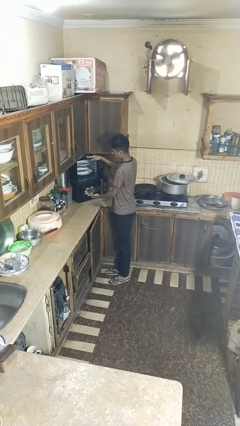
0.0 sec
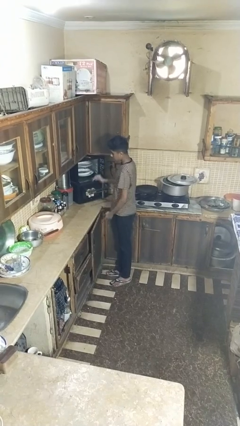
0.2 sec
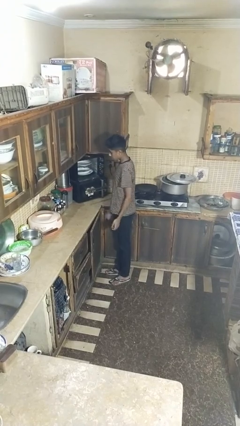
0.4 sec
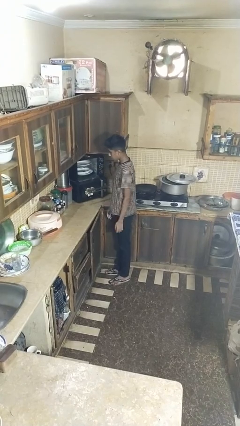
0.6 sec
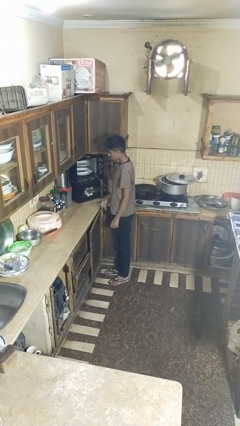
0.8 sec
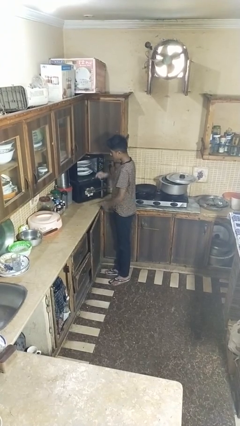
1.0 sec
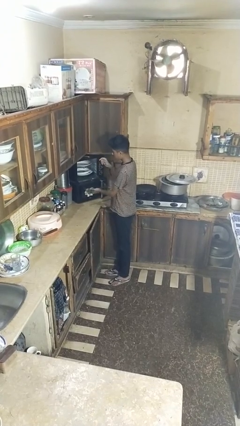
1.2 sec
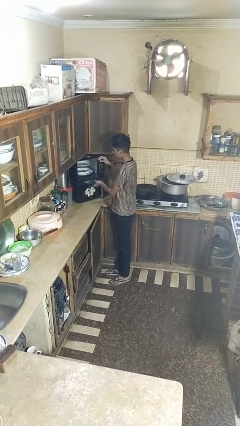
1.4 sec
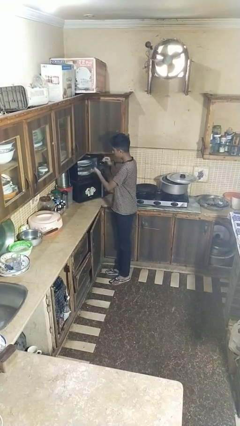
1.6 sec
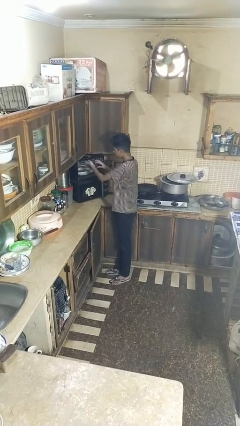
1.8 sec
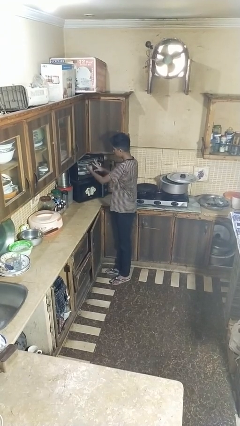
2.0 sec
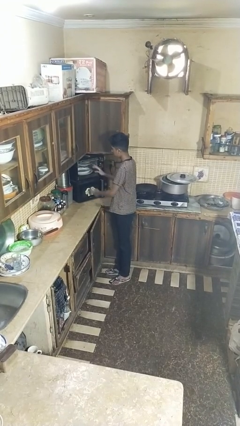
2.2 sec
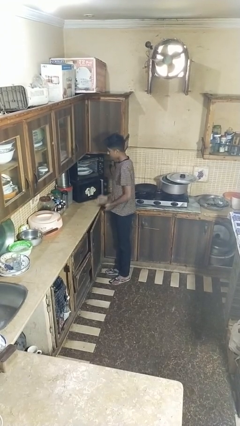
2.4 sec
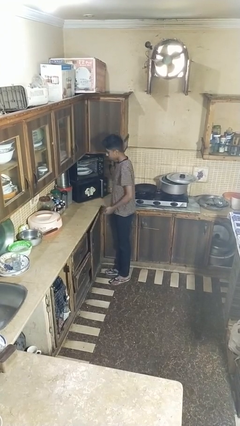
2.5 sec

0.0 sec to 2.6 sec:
person closes dishwasher

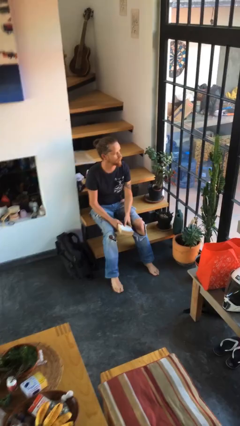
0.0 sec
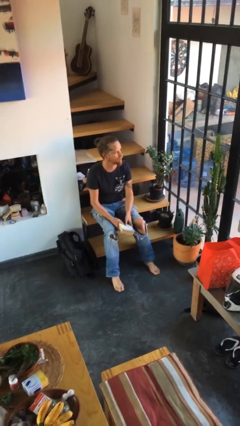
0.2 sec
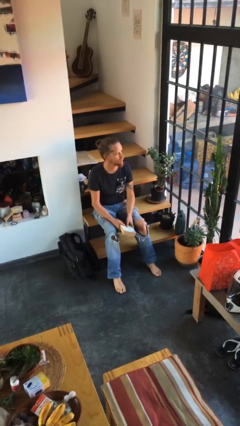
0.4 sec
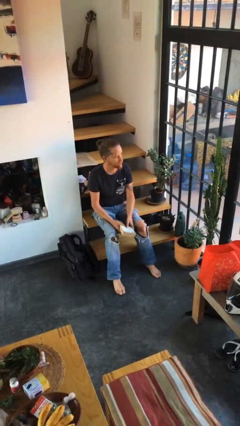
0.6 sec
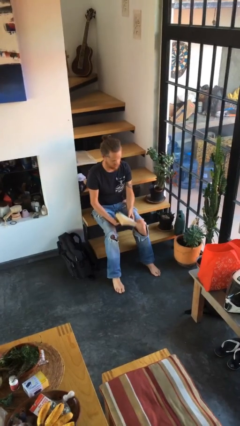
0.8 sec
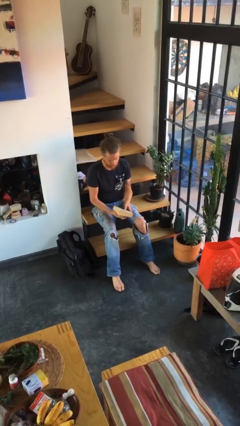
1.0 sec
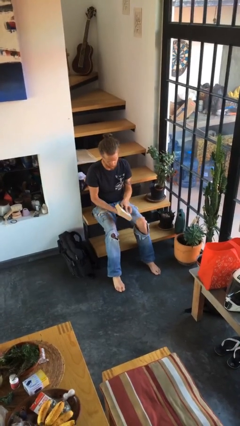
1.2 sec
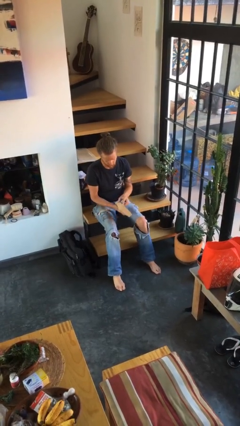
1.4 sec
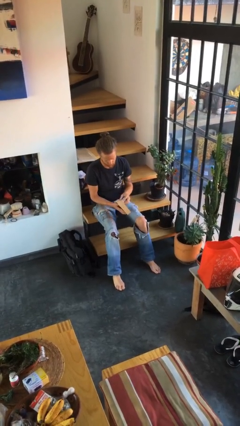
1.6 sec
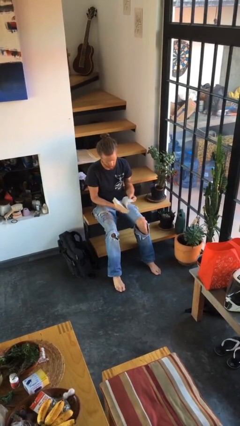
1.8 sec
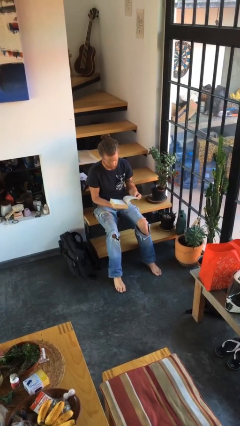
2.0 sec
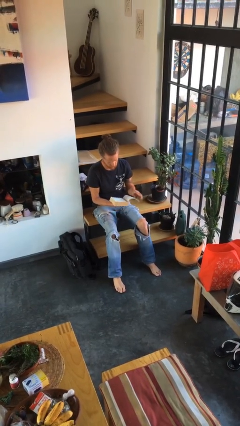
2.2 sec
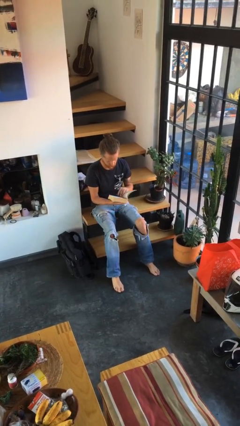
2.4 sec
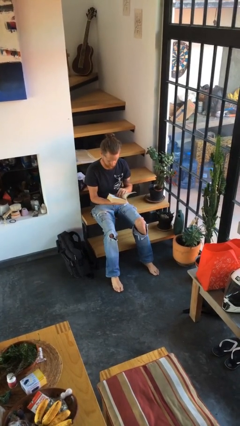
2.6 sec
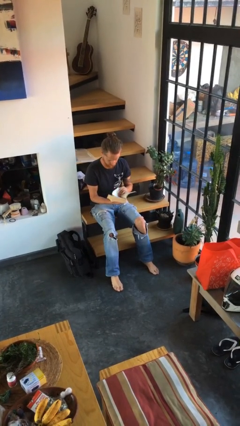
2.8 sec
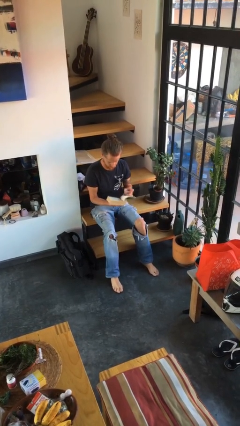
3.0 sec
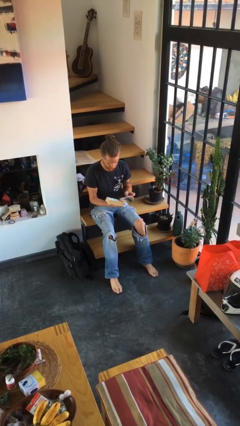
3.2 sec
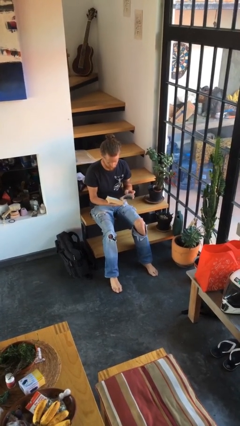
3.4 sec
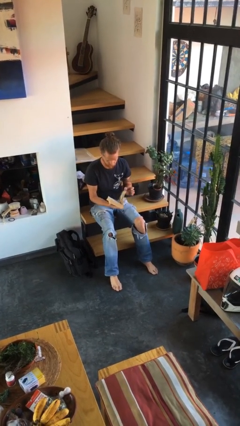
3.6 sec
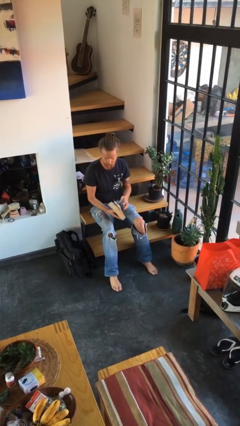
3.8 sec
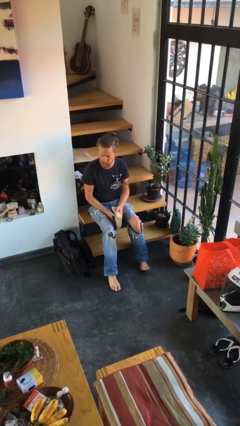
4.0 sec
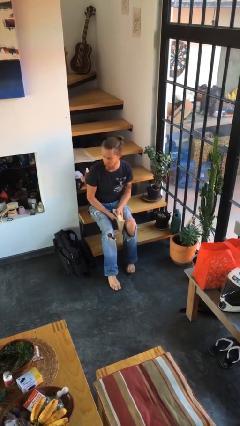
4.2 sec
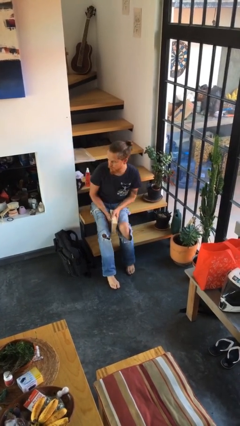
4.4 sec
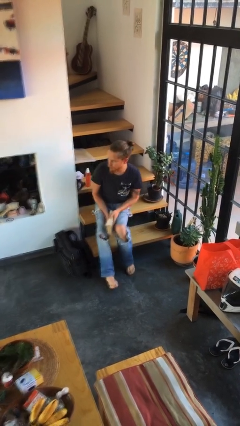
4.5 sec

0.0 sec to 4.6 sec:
person reads book

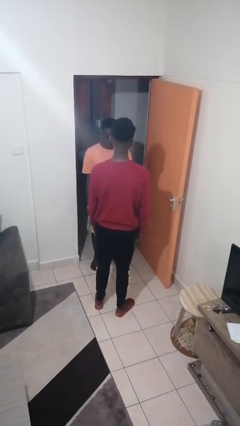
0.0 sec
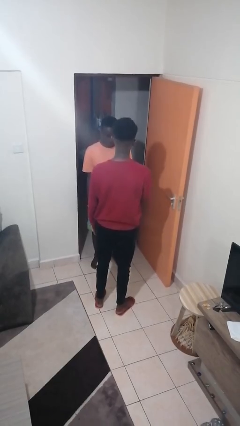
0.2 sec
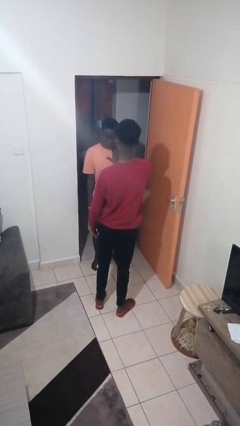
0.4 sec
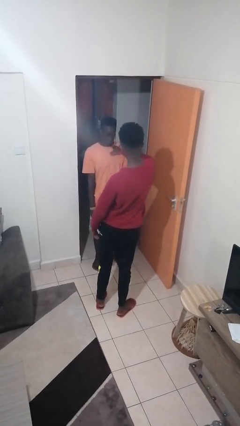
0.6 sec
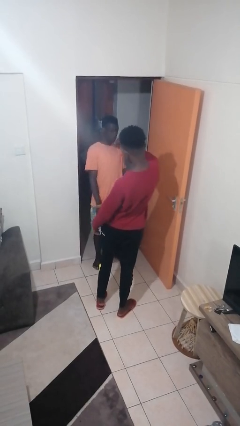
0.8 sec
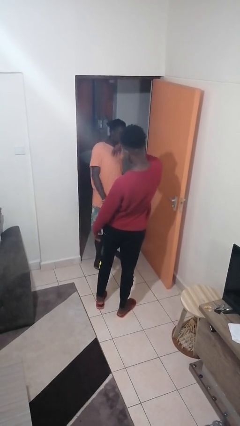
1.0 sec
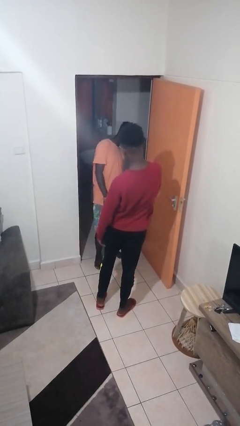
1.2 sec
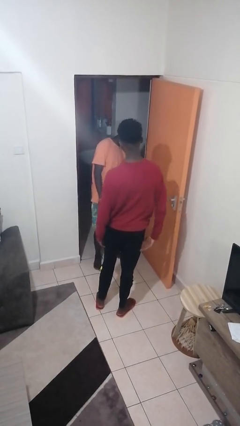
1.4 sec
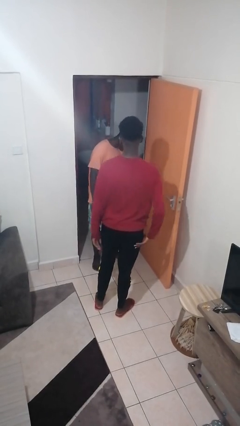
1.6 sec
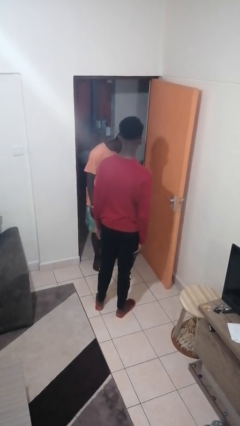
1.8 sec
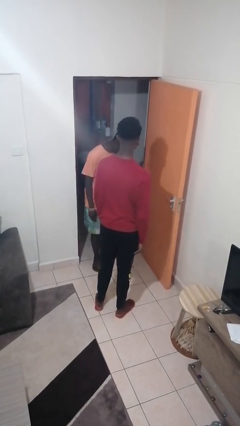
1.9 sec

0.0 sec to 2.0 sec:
person shoves person

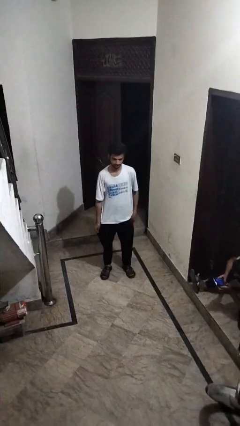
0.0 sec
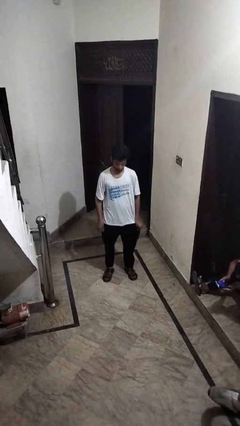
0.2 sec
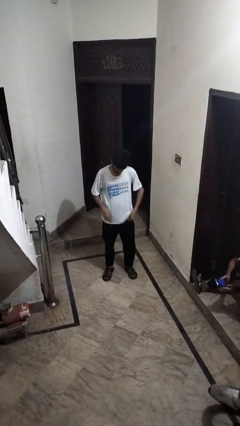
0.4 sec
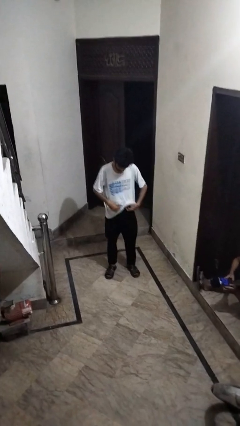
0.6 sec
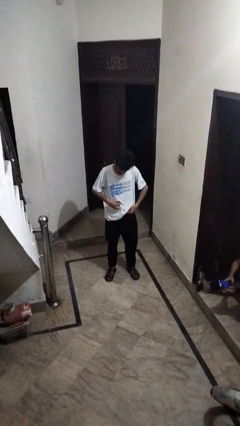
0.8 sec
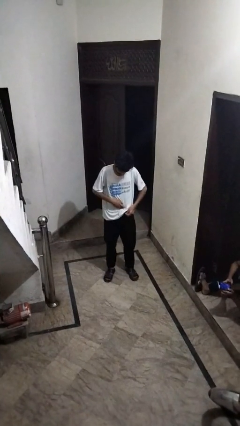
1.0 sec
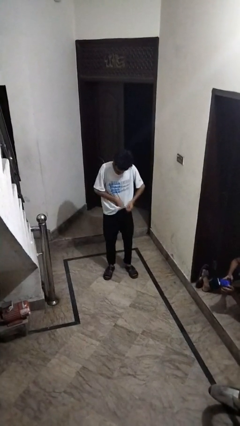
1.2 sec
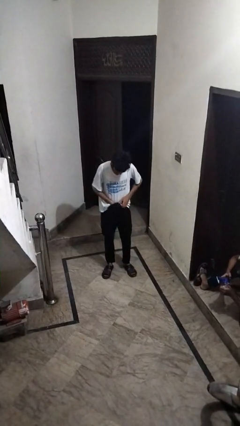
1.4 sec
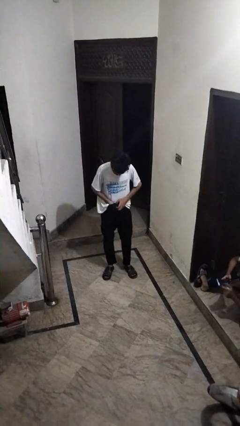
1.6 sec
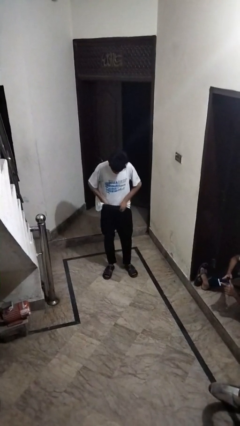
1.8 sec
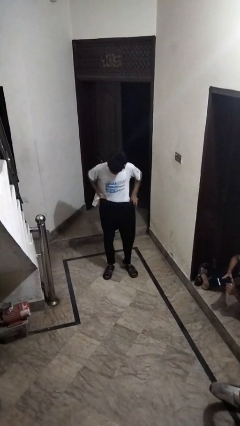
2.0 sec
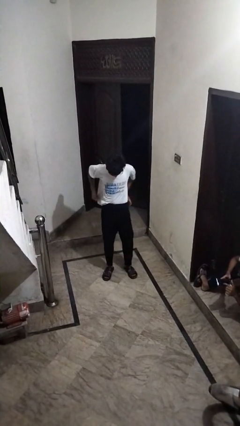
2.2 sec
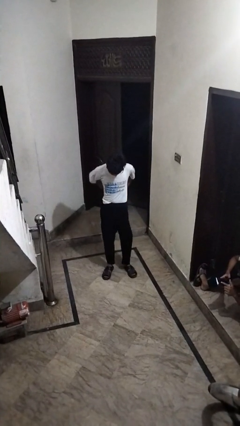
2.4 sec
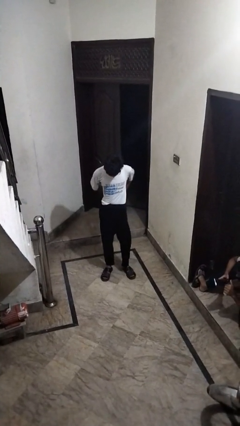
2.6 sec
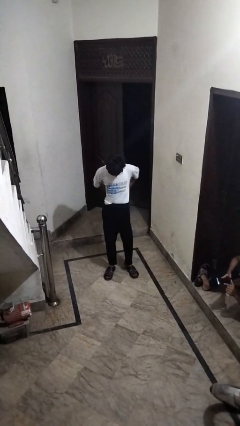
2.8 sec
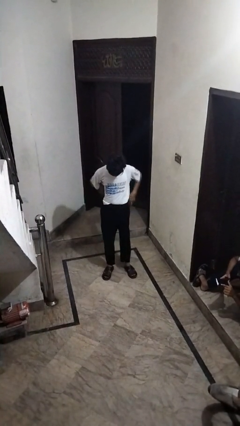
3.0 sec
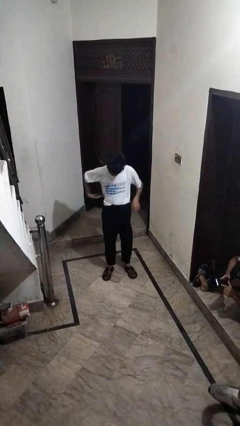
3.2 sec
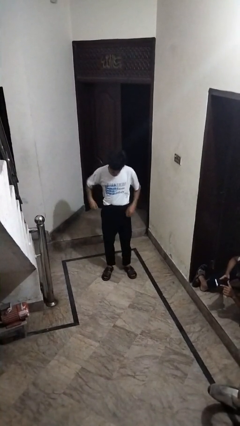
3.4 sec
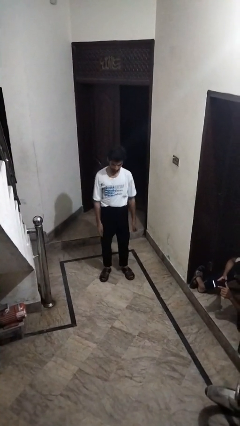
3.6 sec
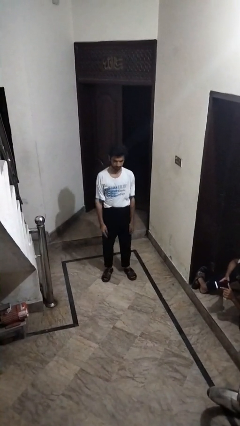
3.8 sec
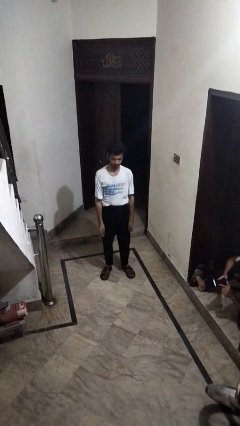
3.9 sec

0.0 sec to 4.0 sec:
person tucks in shirt

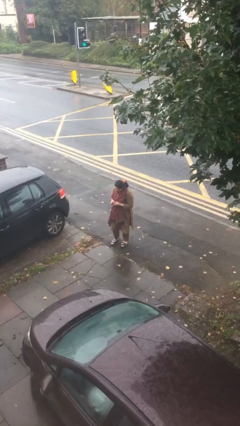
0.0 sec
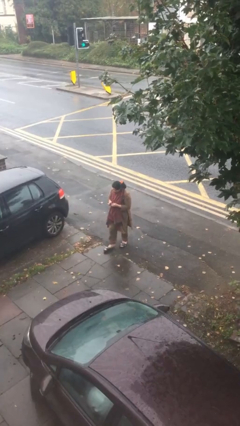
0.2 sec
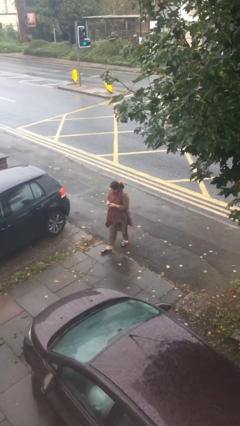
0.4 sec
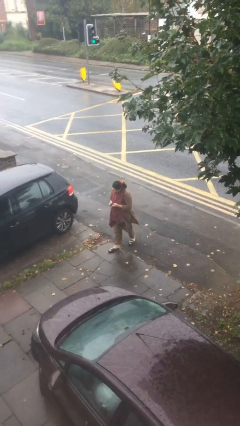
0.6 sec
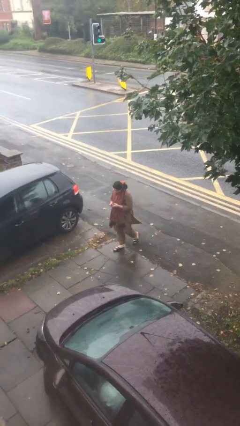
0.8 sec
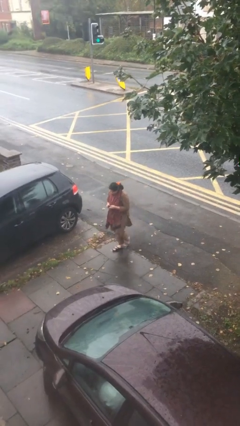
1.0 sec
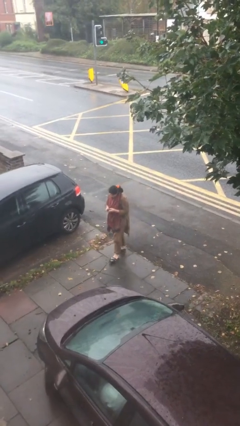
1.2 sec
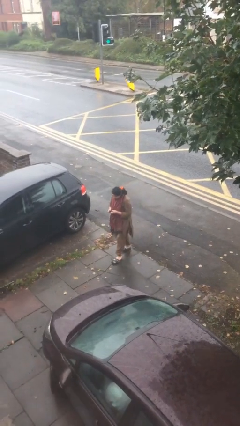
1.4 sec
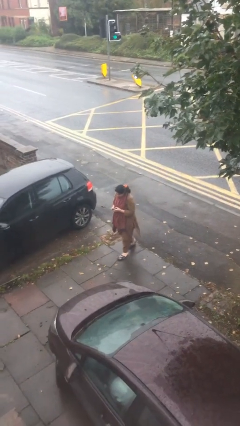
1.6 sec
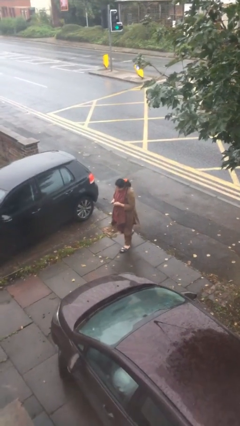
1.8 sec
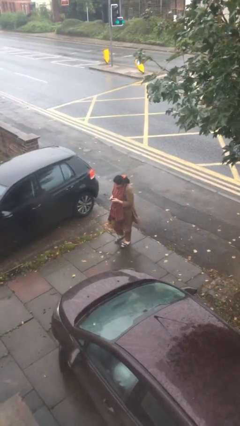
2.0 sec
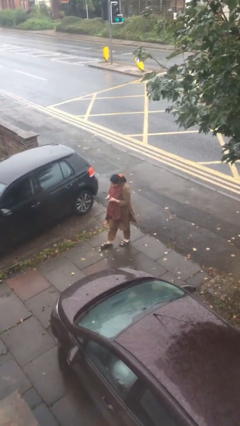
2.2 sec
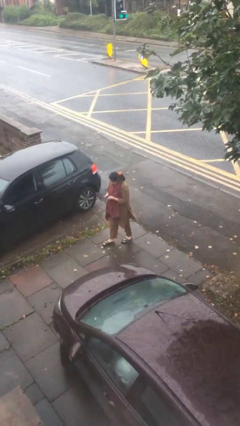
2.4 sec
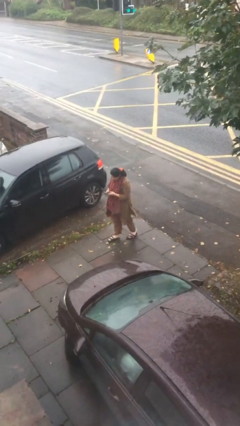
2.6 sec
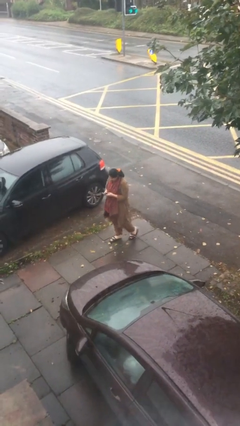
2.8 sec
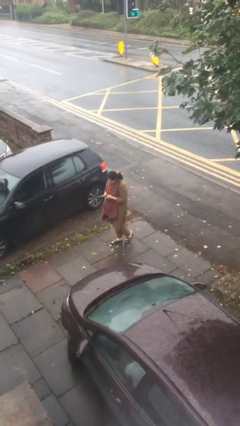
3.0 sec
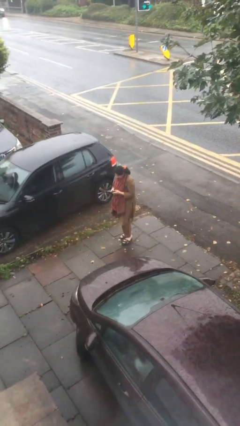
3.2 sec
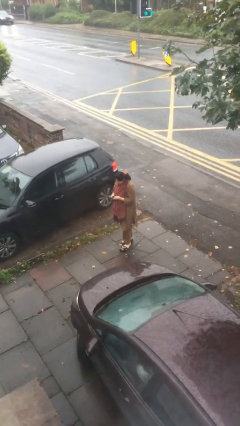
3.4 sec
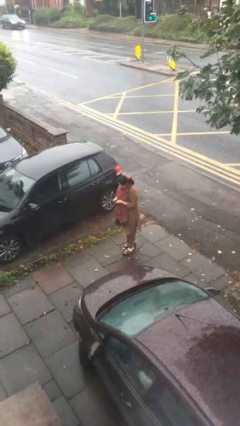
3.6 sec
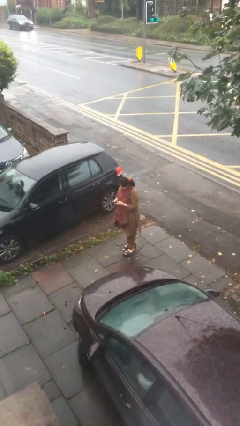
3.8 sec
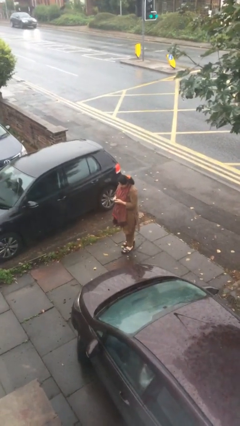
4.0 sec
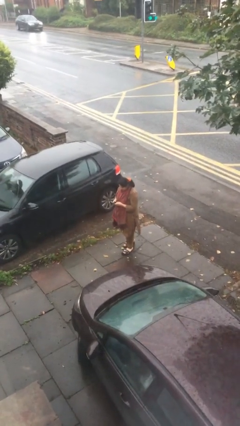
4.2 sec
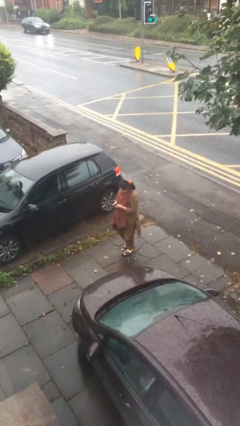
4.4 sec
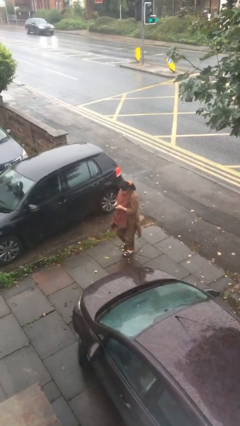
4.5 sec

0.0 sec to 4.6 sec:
person texts on phone
